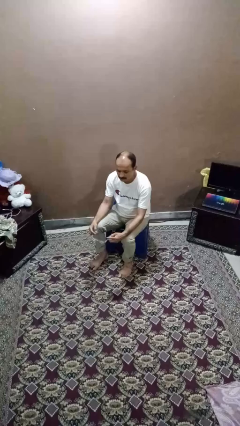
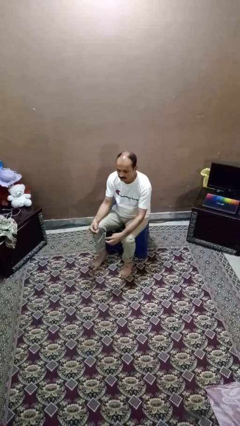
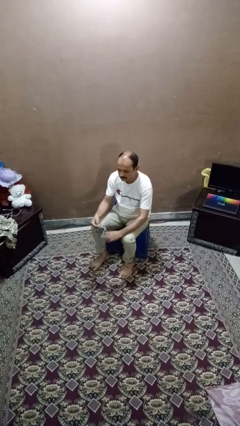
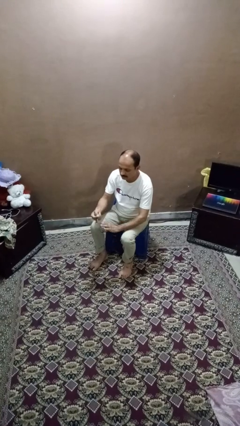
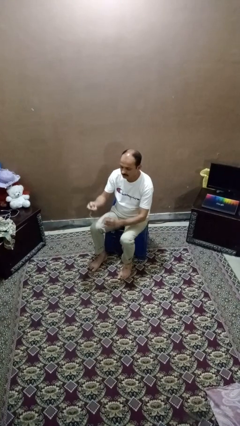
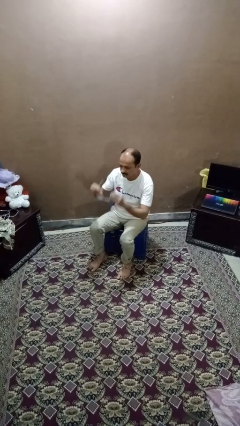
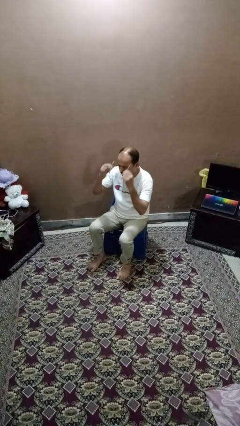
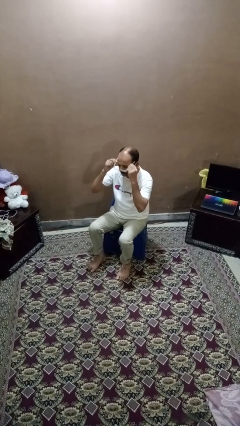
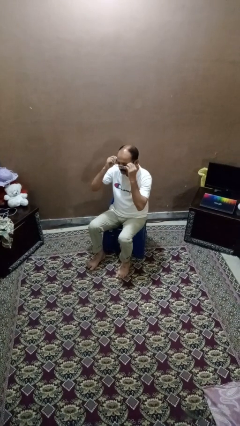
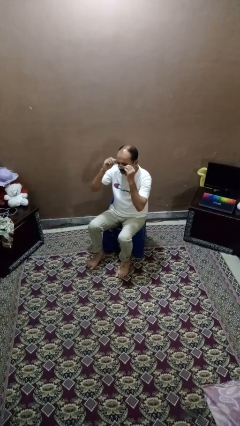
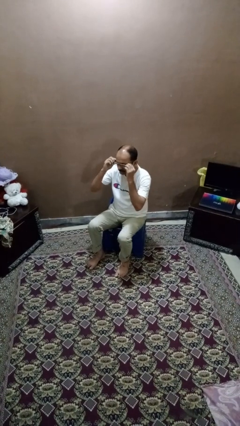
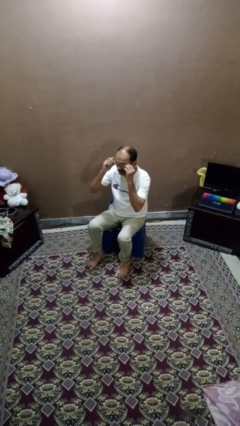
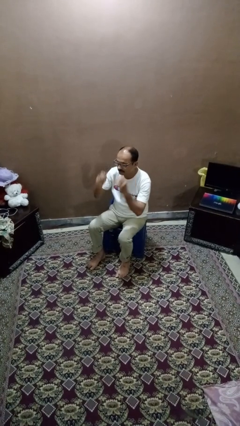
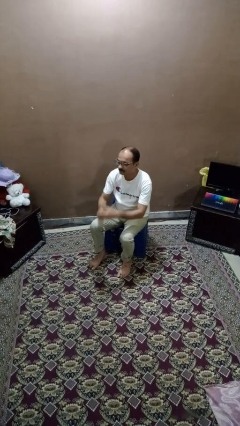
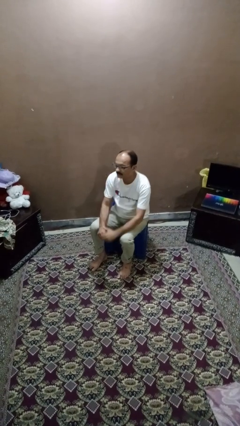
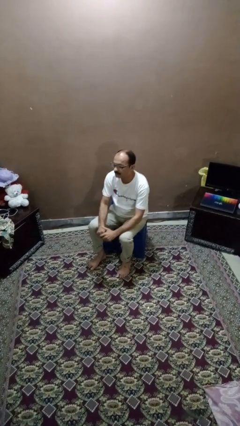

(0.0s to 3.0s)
person puts on glasses

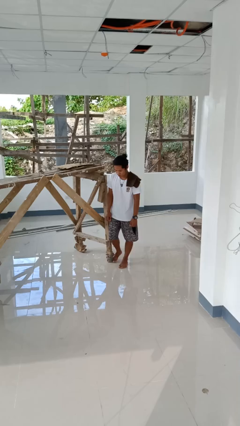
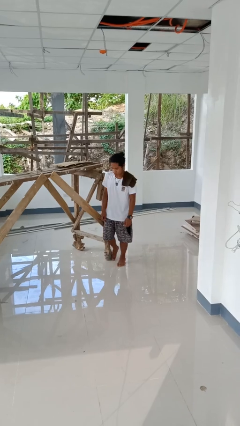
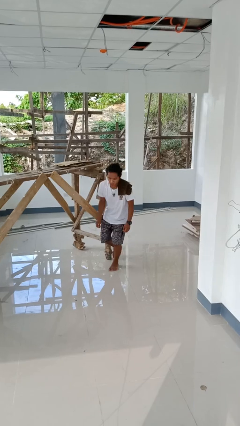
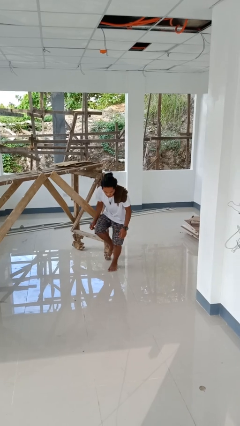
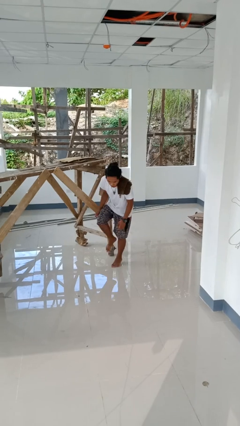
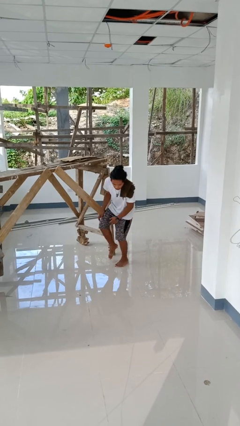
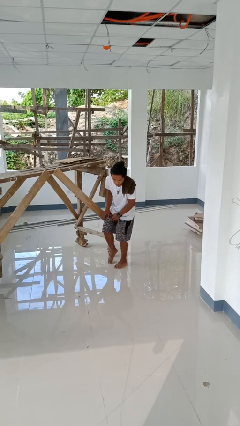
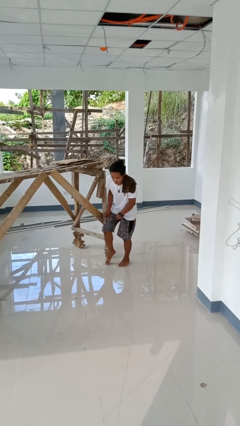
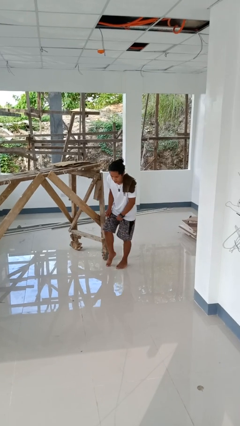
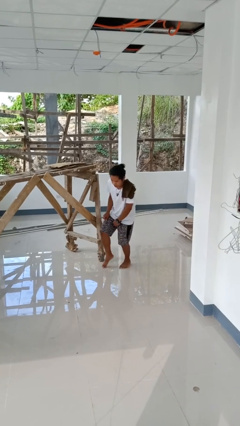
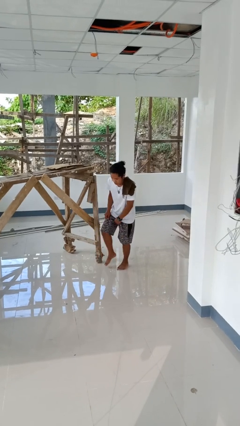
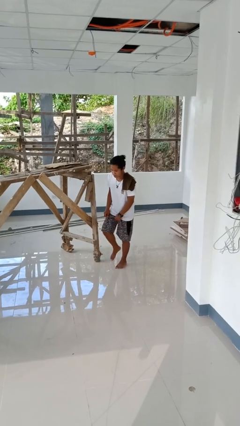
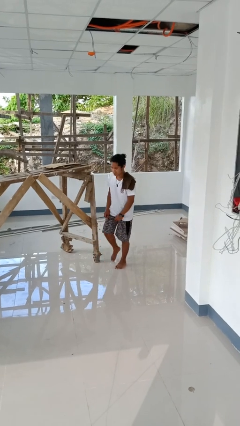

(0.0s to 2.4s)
person stubs toe

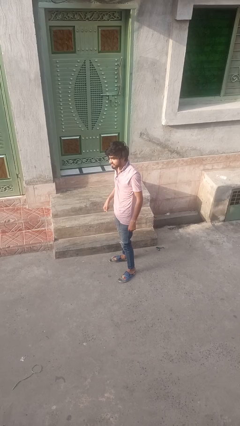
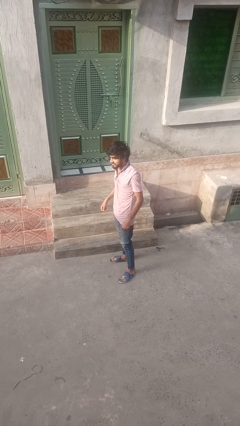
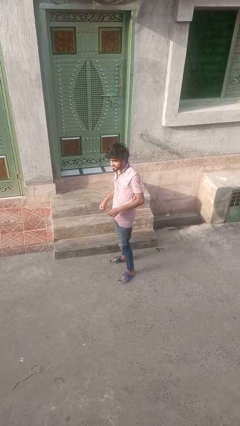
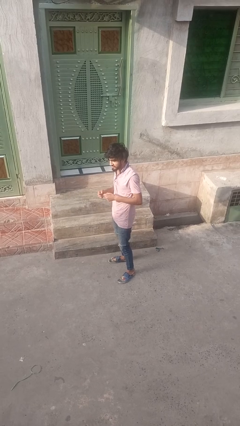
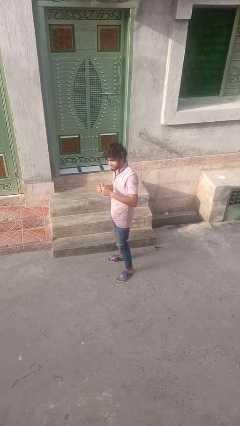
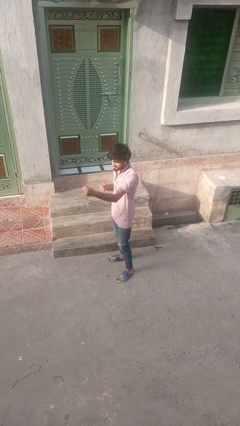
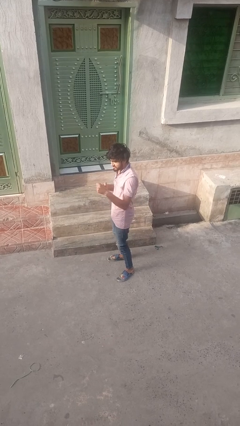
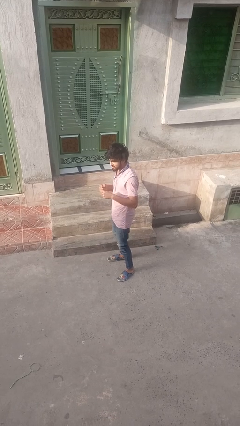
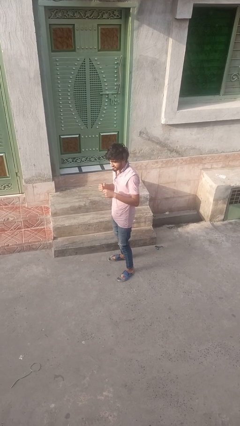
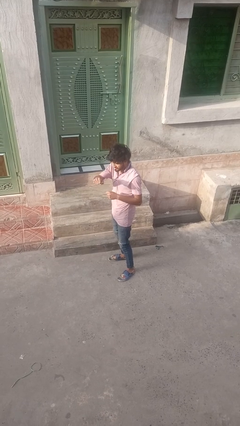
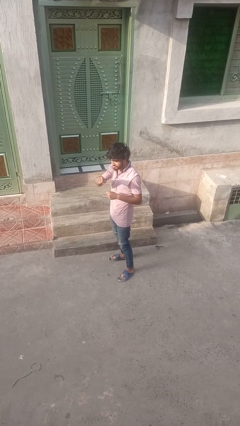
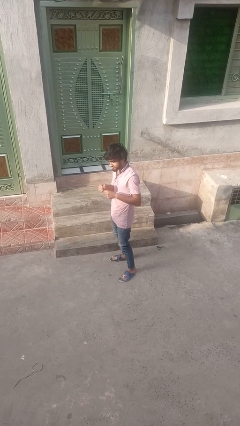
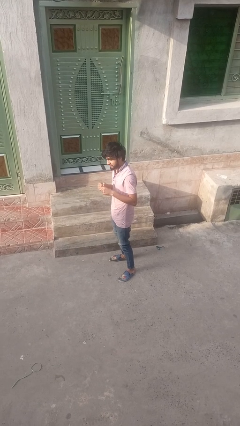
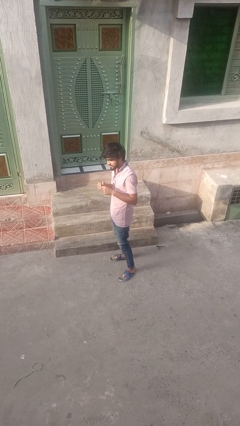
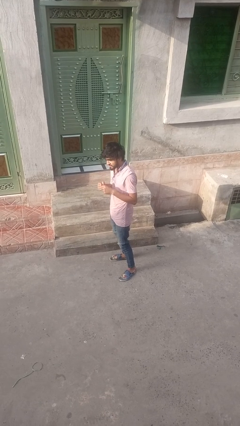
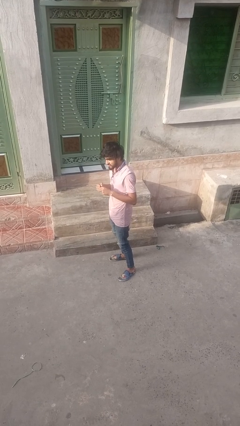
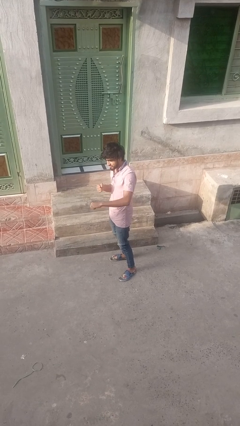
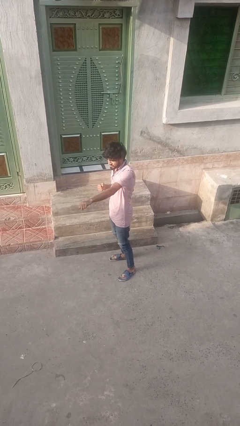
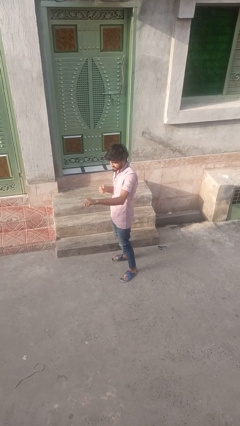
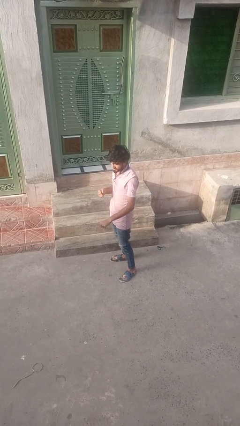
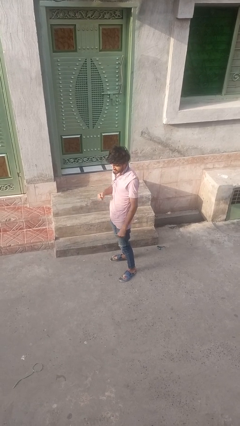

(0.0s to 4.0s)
person punches

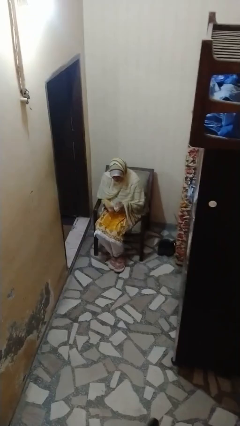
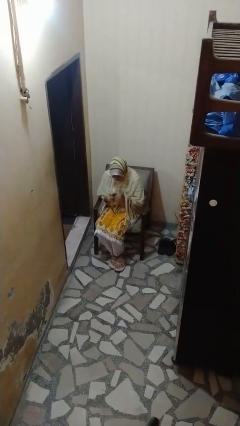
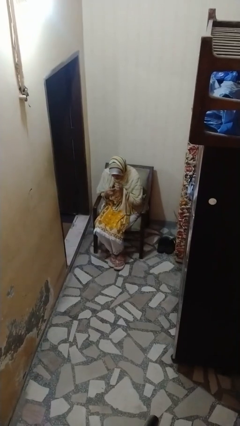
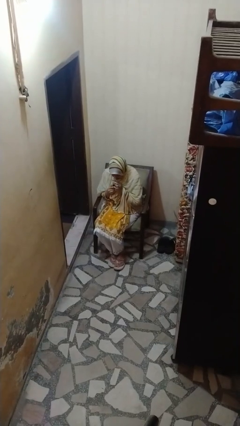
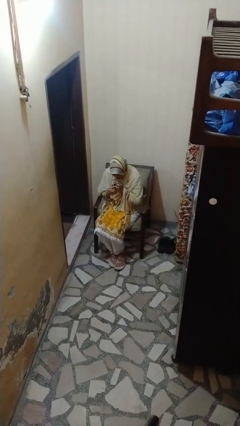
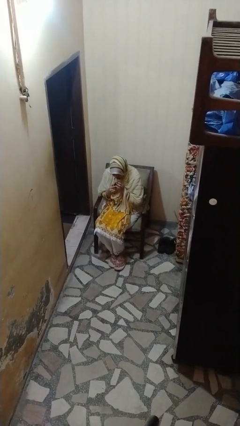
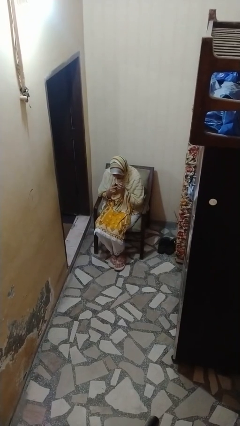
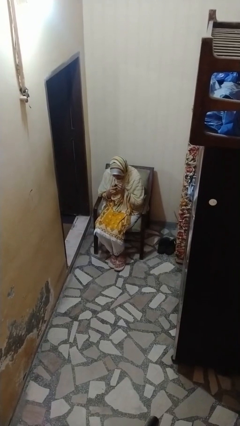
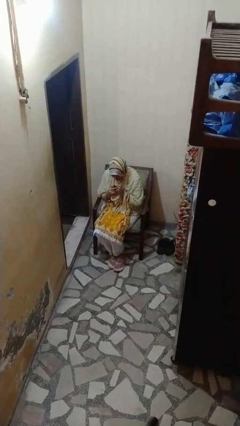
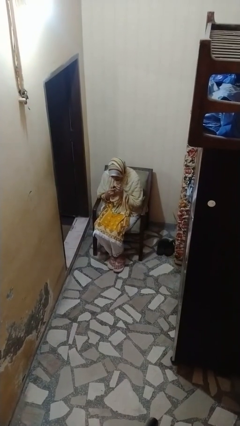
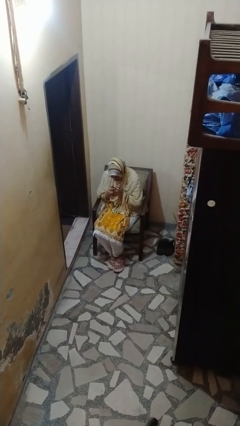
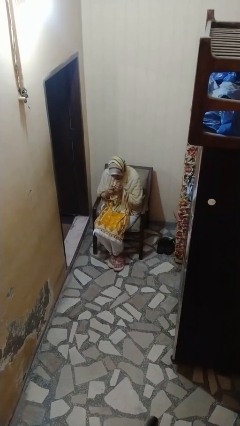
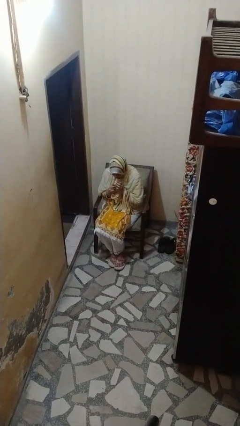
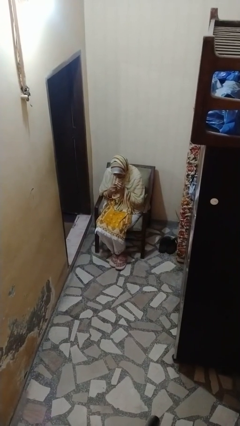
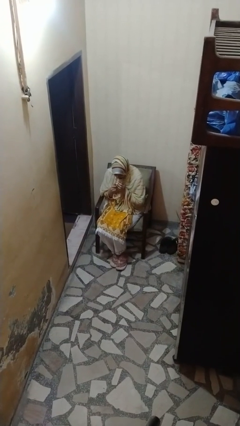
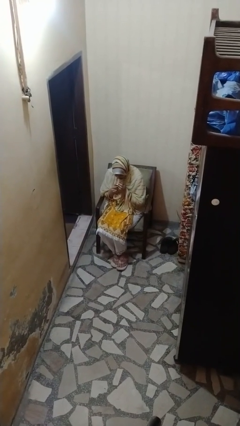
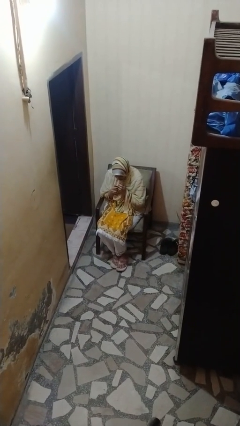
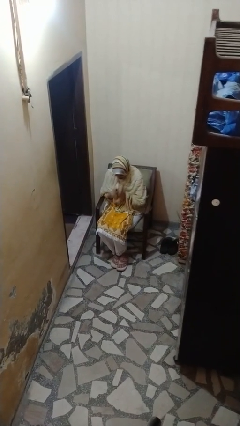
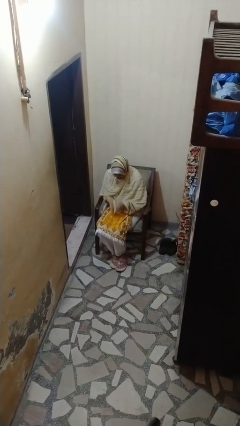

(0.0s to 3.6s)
person eats banana

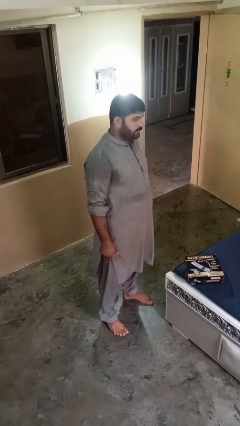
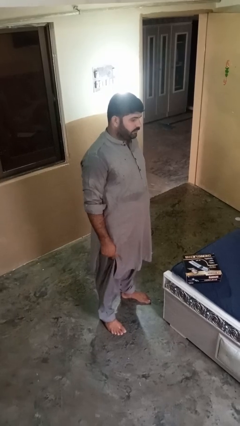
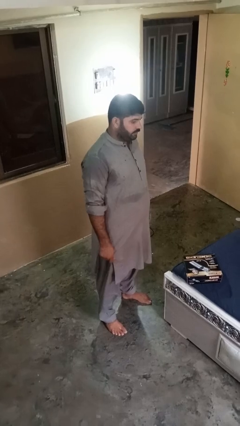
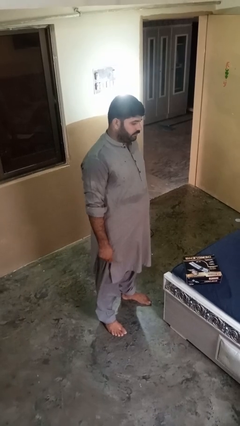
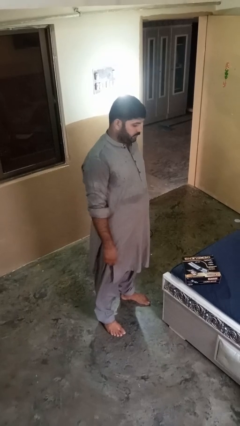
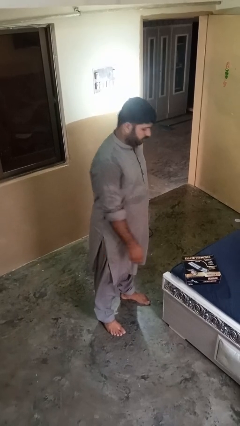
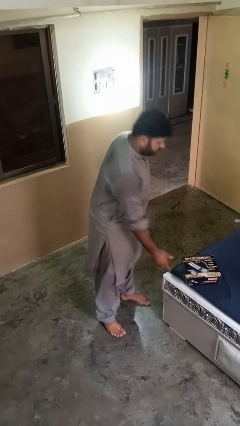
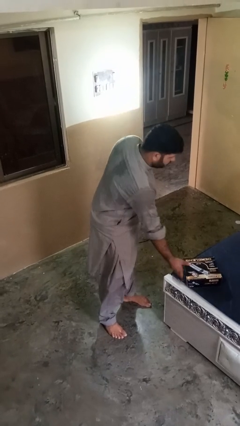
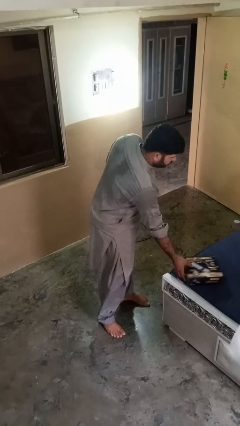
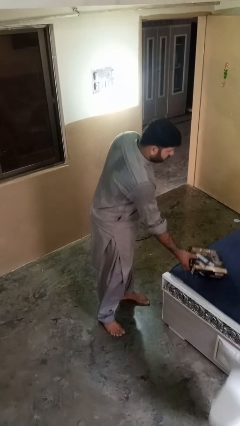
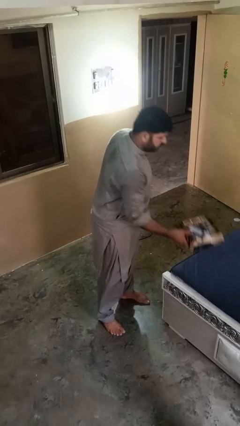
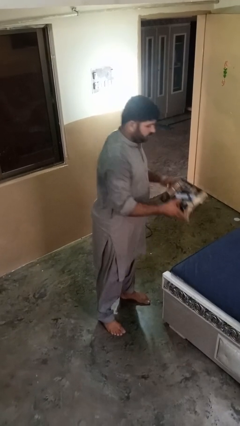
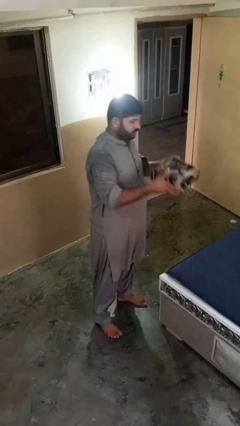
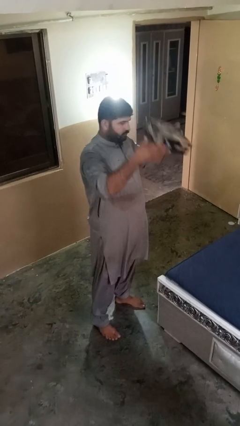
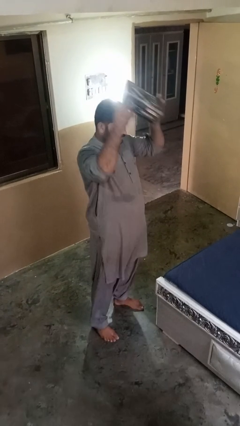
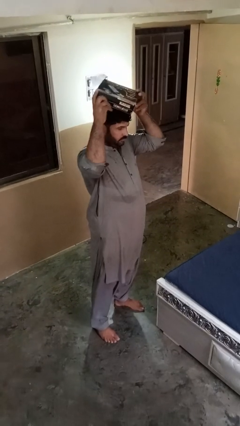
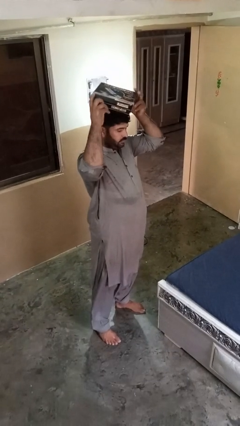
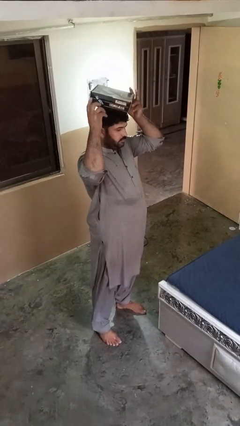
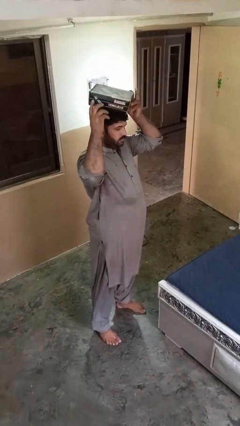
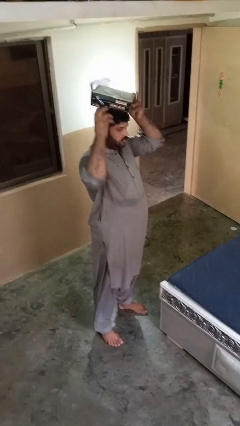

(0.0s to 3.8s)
person holds object above head

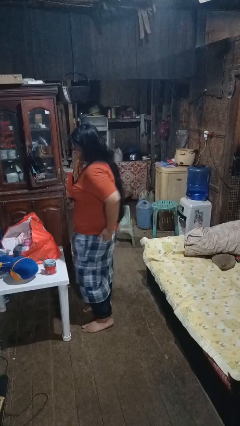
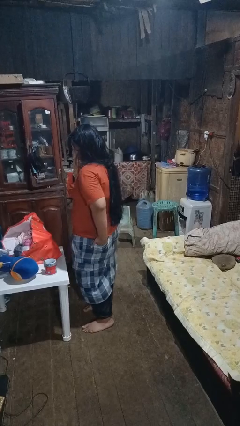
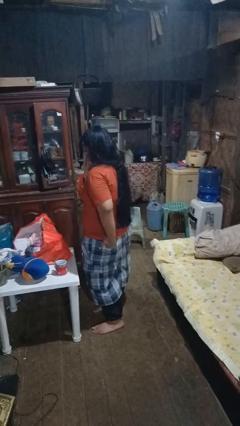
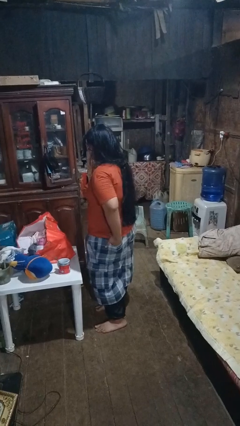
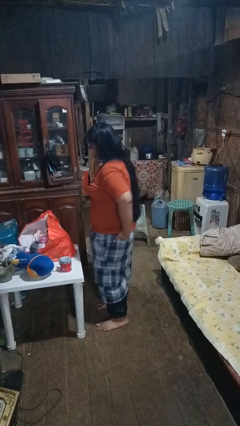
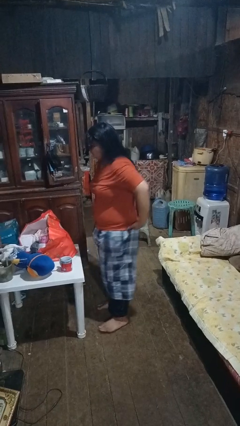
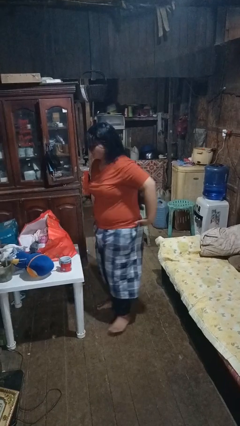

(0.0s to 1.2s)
person puts hands in back pockets
